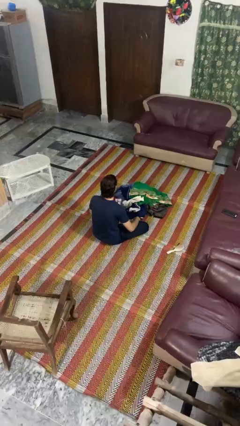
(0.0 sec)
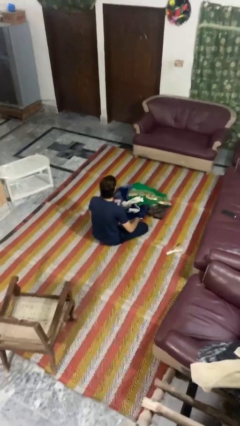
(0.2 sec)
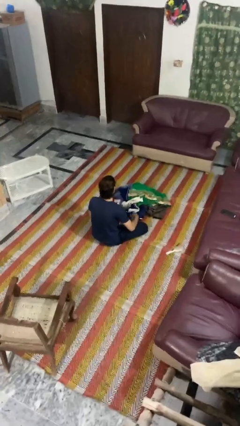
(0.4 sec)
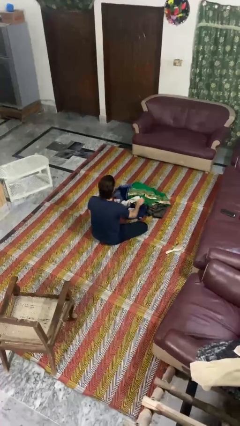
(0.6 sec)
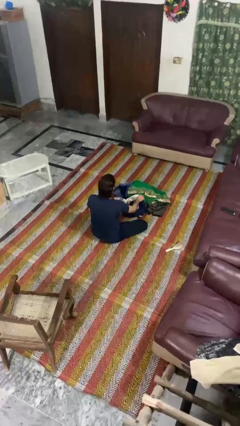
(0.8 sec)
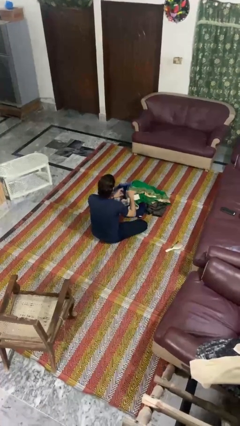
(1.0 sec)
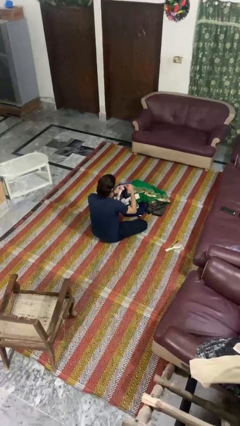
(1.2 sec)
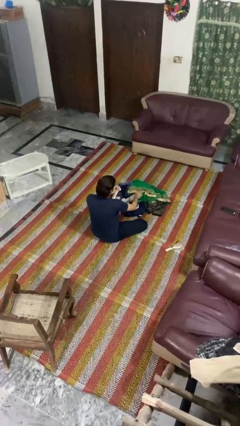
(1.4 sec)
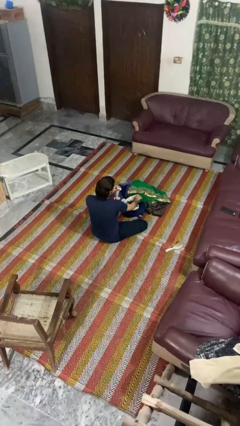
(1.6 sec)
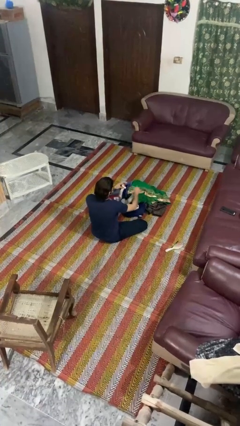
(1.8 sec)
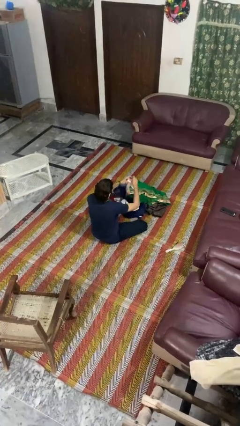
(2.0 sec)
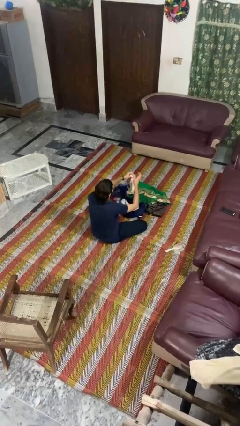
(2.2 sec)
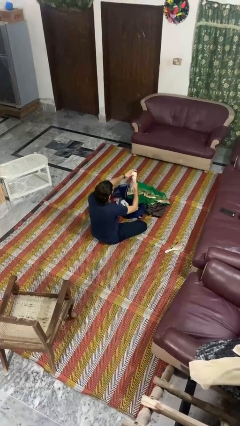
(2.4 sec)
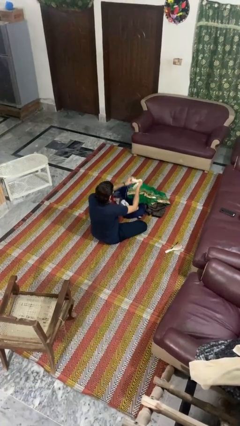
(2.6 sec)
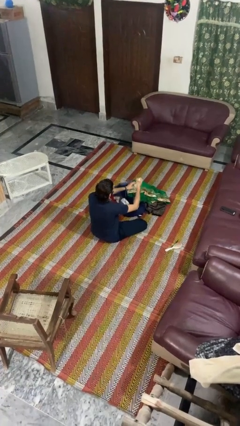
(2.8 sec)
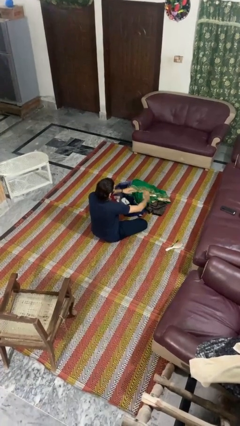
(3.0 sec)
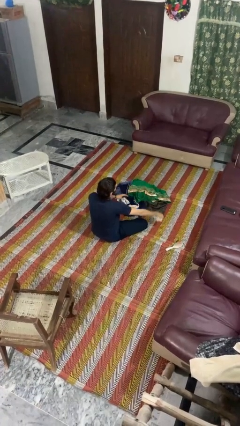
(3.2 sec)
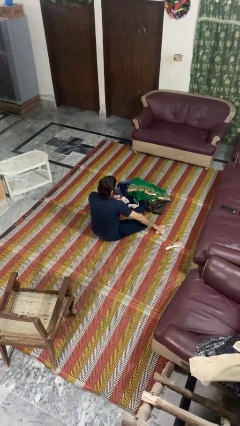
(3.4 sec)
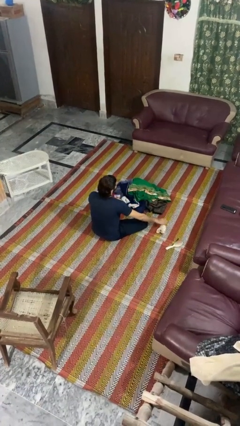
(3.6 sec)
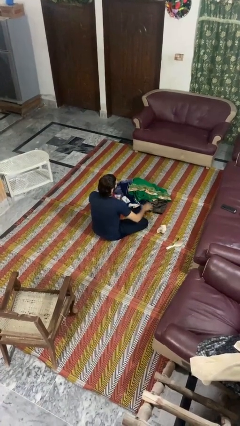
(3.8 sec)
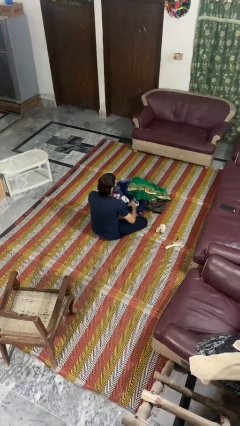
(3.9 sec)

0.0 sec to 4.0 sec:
person folds socks

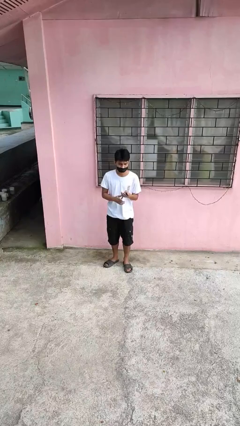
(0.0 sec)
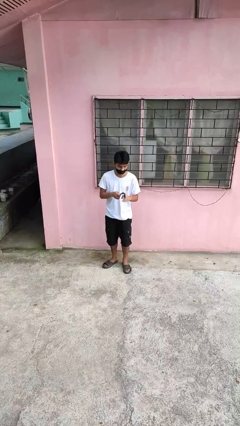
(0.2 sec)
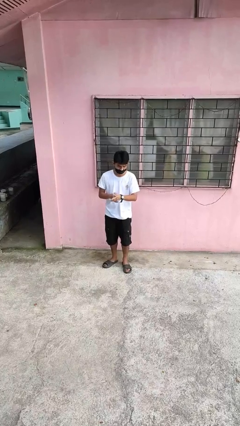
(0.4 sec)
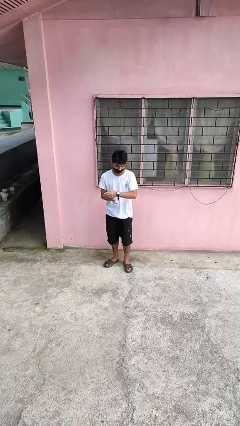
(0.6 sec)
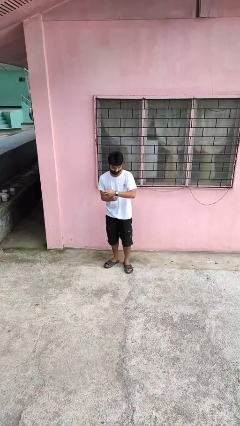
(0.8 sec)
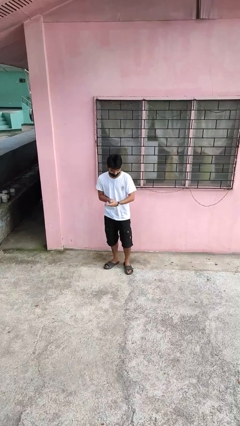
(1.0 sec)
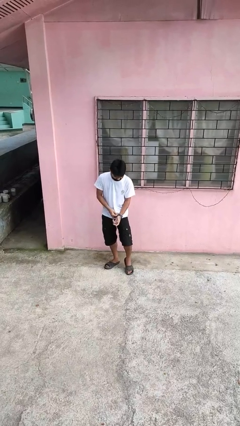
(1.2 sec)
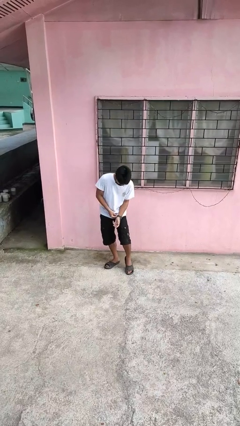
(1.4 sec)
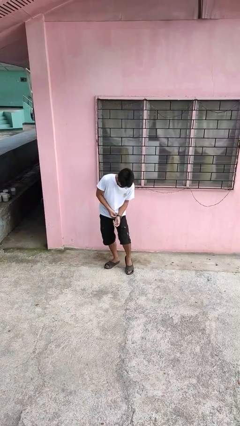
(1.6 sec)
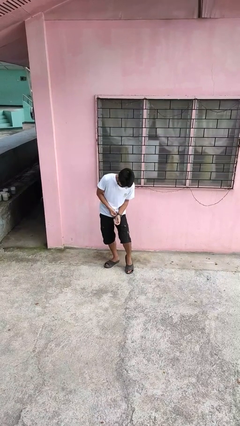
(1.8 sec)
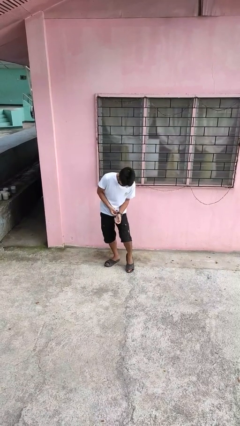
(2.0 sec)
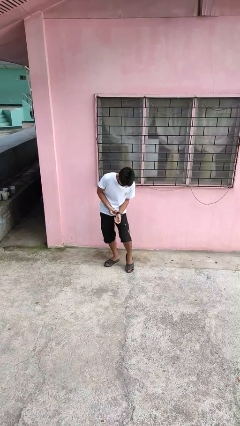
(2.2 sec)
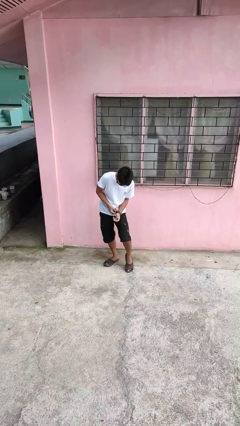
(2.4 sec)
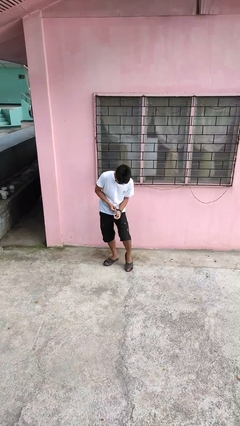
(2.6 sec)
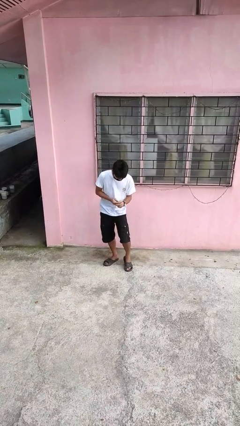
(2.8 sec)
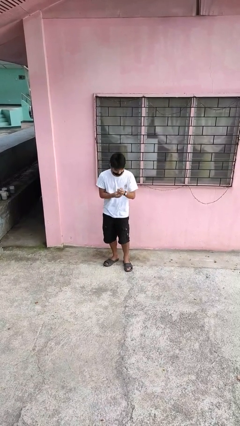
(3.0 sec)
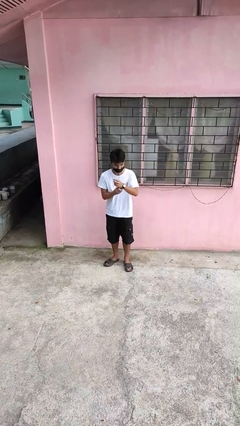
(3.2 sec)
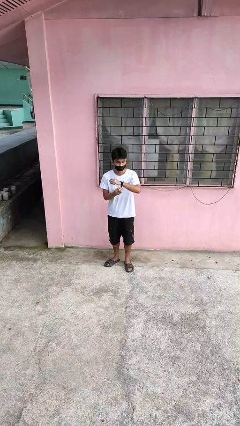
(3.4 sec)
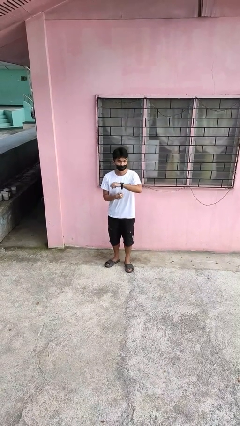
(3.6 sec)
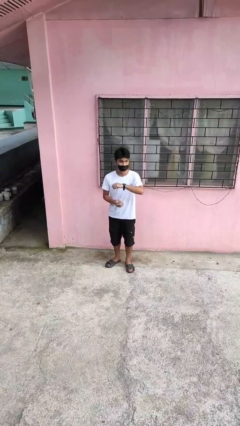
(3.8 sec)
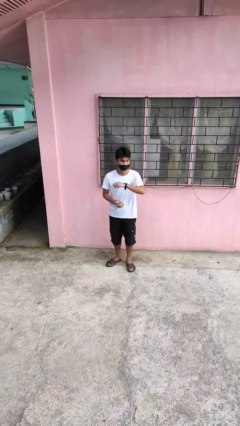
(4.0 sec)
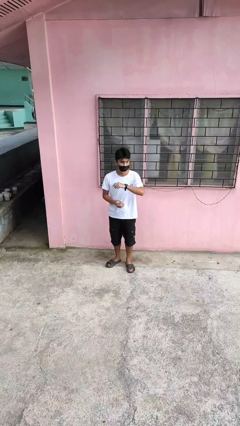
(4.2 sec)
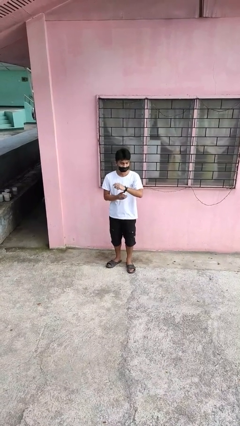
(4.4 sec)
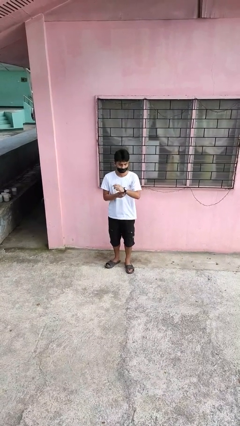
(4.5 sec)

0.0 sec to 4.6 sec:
person puts on wristwatch

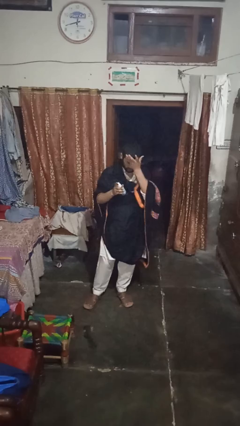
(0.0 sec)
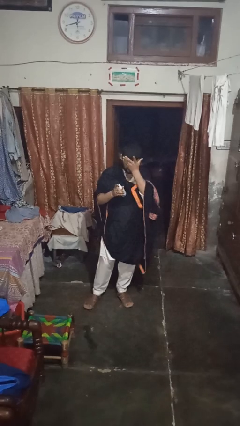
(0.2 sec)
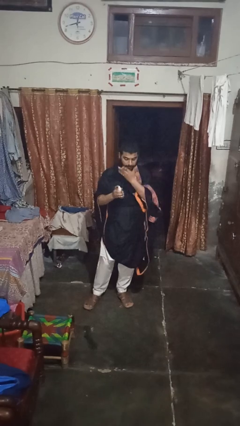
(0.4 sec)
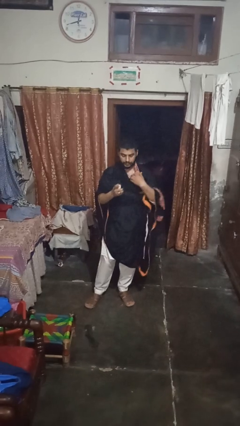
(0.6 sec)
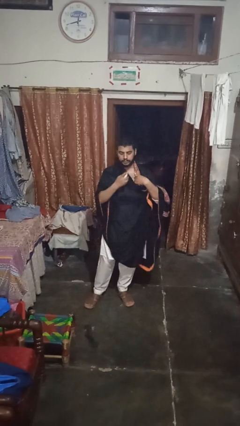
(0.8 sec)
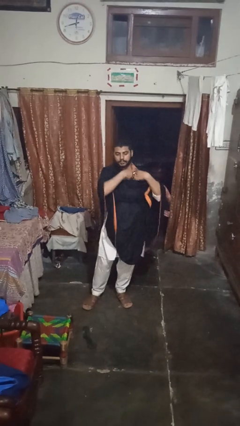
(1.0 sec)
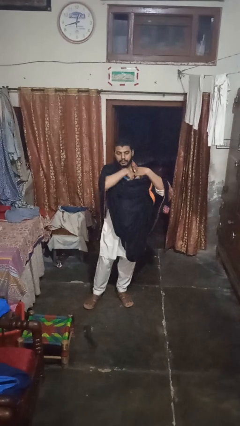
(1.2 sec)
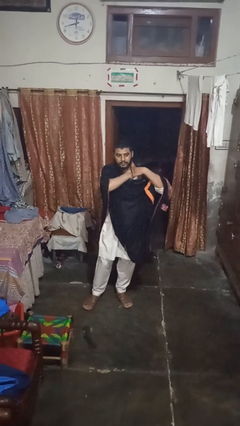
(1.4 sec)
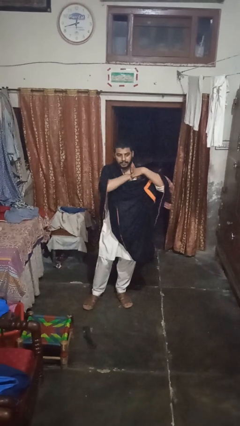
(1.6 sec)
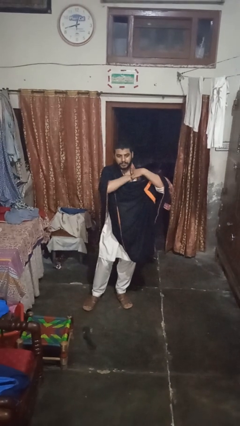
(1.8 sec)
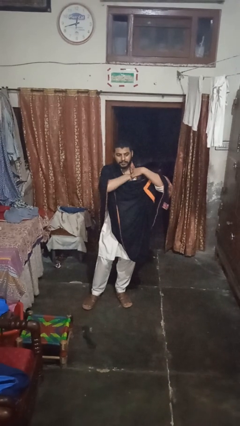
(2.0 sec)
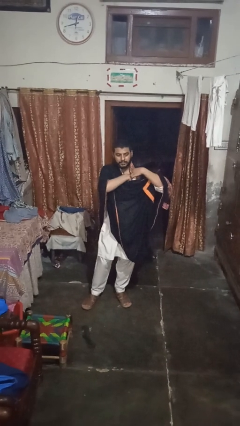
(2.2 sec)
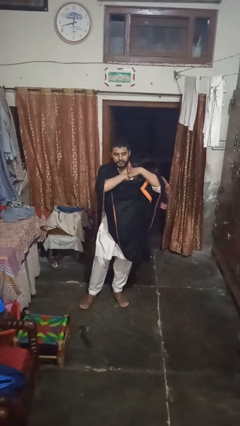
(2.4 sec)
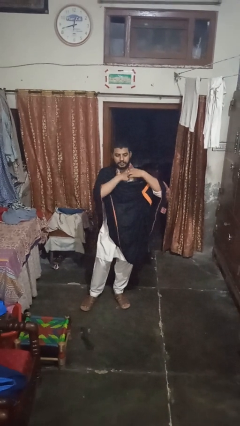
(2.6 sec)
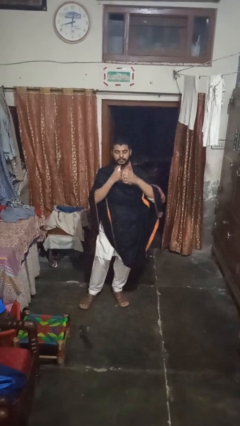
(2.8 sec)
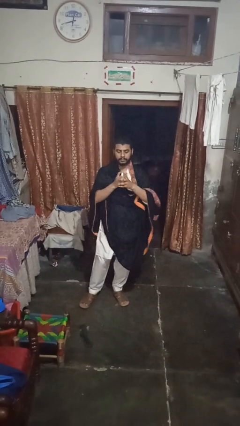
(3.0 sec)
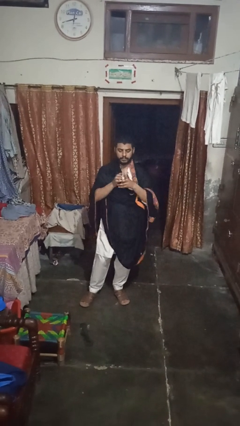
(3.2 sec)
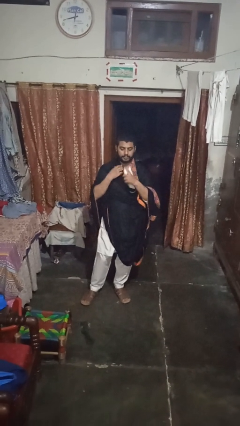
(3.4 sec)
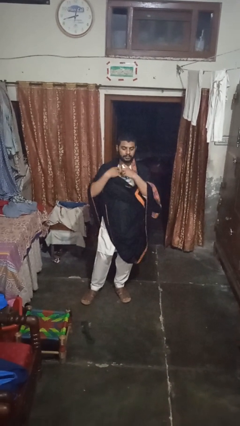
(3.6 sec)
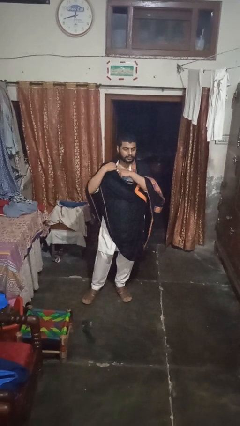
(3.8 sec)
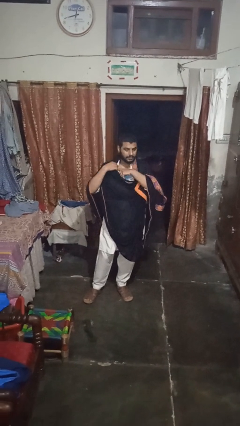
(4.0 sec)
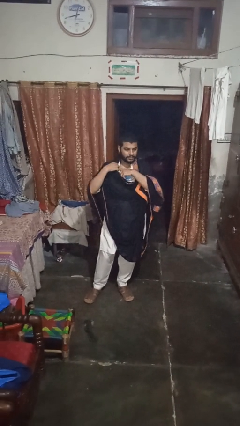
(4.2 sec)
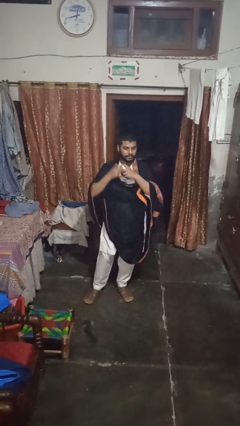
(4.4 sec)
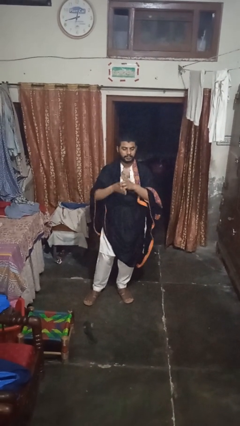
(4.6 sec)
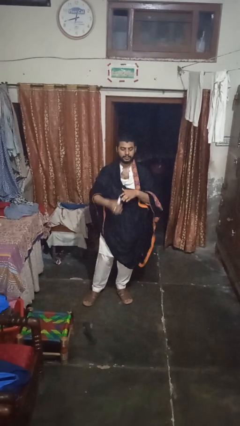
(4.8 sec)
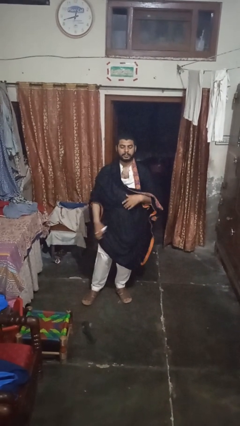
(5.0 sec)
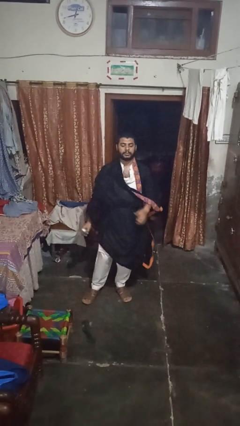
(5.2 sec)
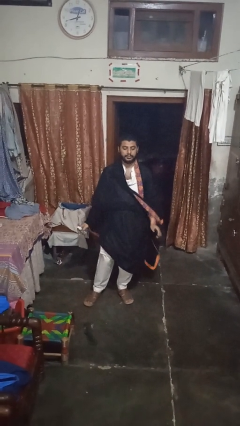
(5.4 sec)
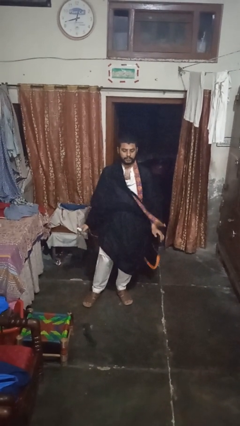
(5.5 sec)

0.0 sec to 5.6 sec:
person applies deodorant

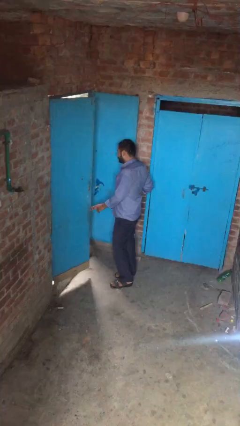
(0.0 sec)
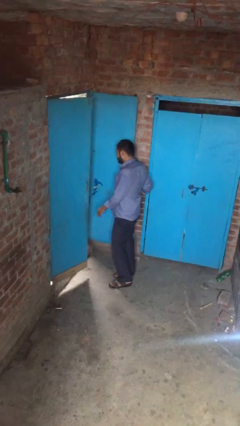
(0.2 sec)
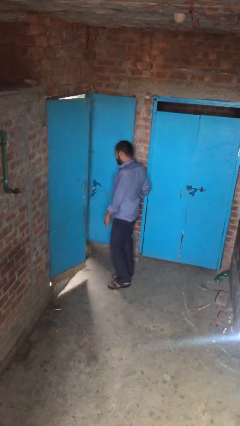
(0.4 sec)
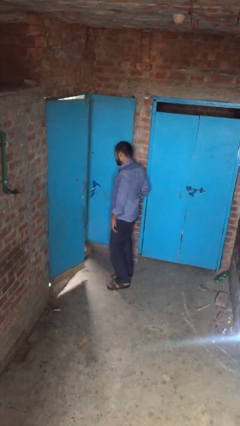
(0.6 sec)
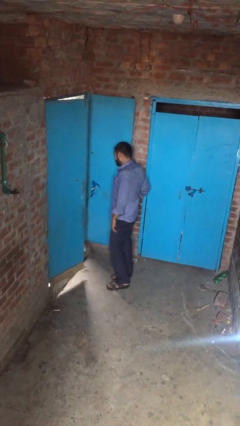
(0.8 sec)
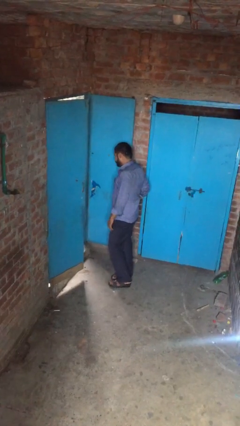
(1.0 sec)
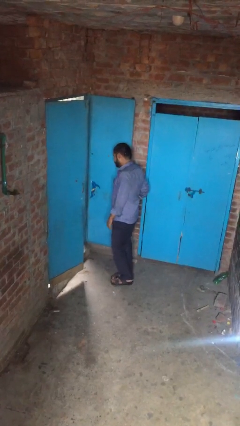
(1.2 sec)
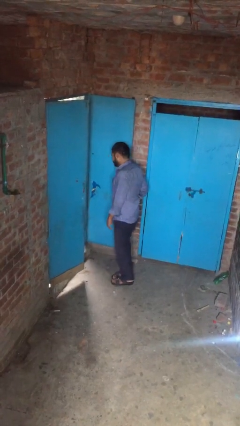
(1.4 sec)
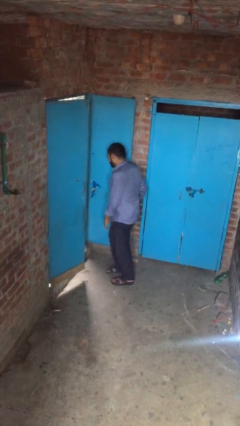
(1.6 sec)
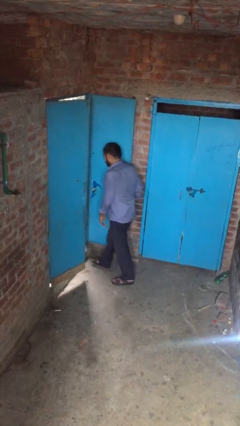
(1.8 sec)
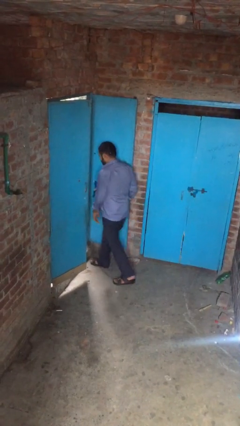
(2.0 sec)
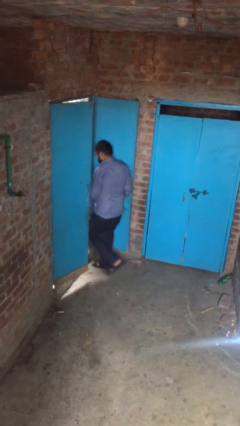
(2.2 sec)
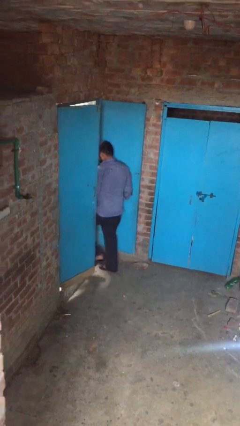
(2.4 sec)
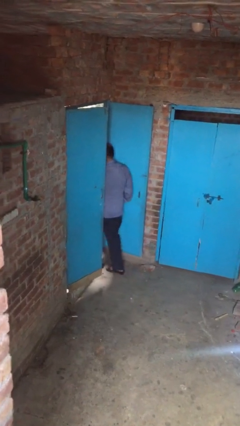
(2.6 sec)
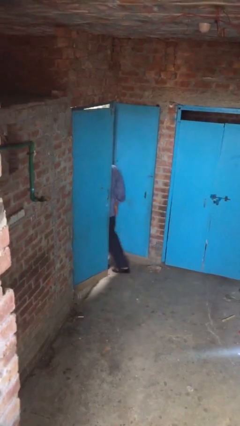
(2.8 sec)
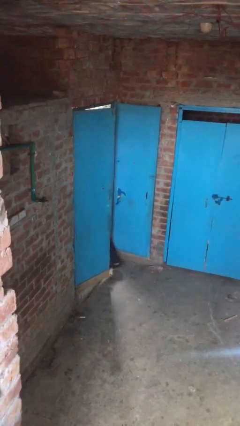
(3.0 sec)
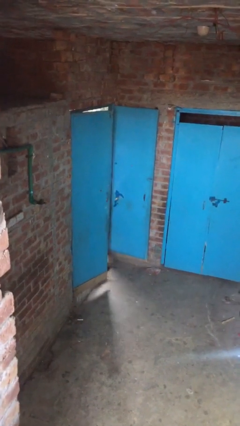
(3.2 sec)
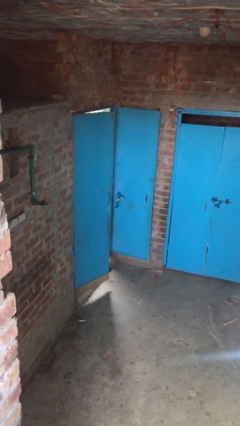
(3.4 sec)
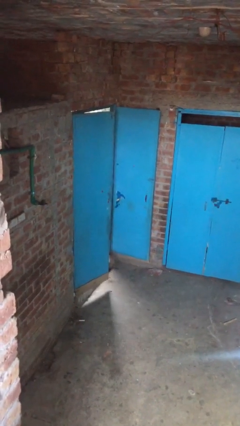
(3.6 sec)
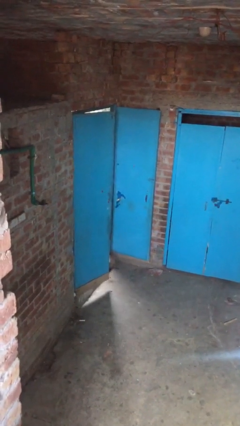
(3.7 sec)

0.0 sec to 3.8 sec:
person exits scene through structure
